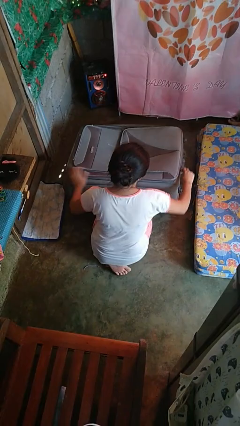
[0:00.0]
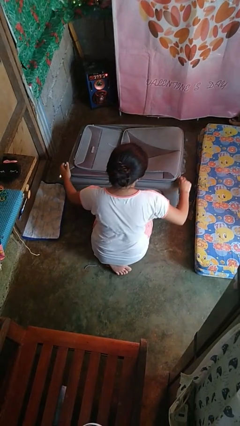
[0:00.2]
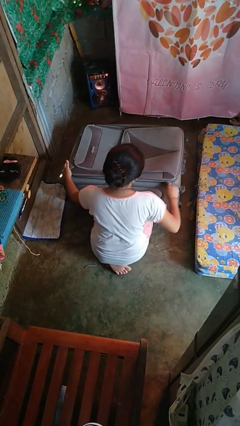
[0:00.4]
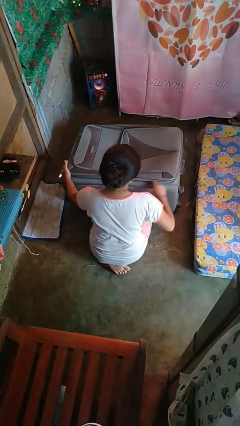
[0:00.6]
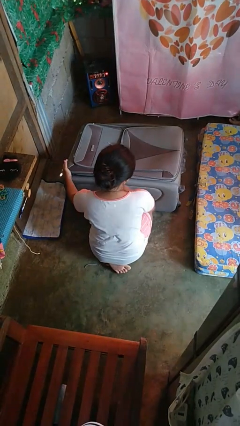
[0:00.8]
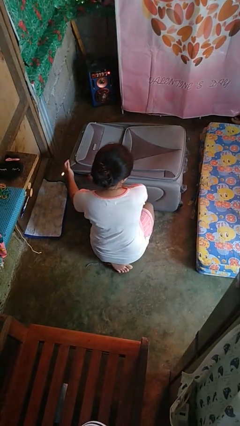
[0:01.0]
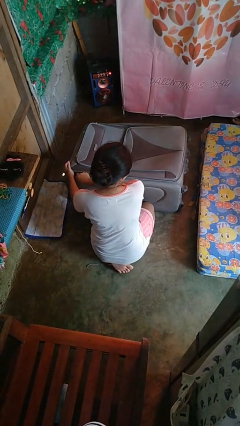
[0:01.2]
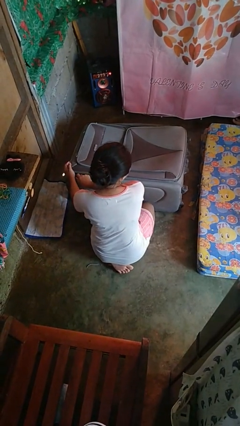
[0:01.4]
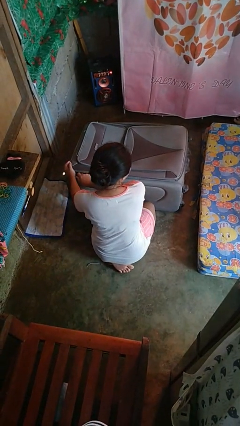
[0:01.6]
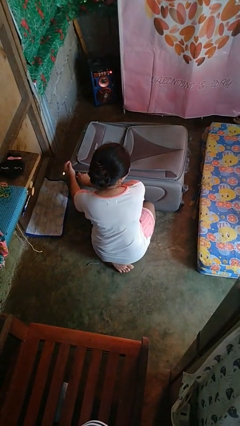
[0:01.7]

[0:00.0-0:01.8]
person closes suitcase

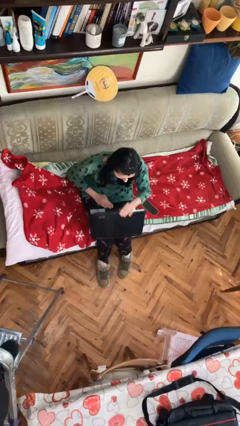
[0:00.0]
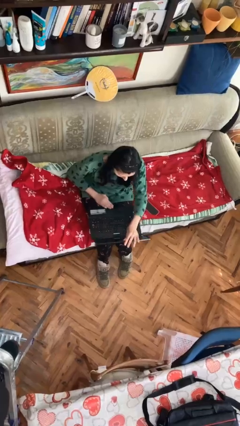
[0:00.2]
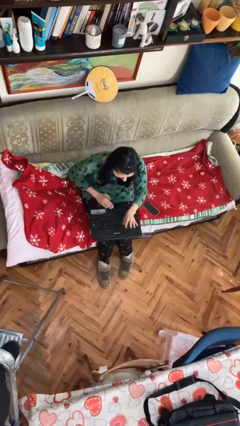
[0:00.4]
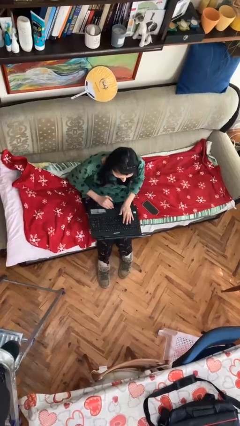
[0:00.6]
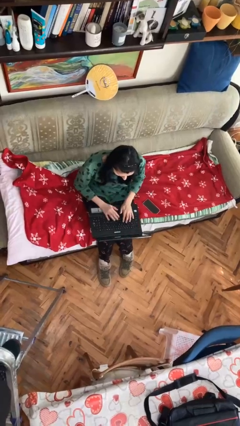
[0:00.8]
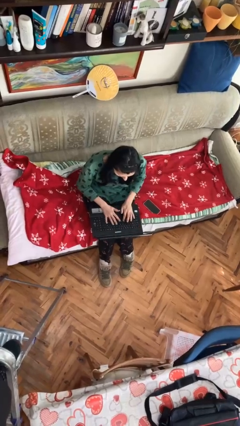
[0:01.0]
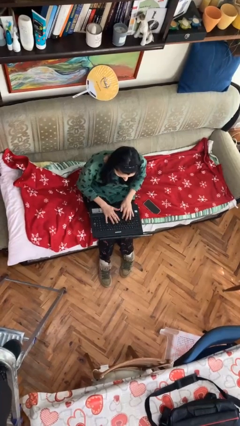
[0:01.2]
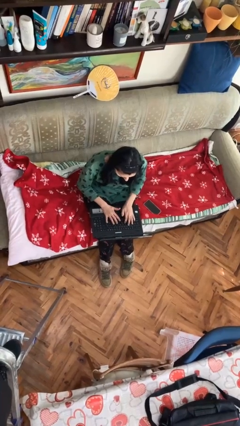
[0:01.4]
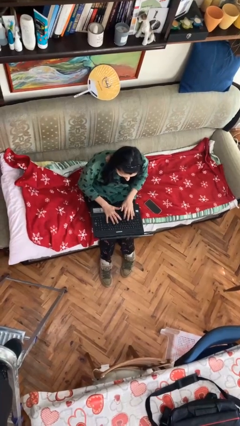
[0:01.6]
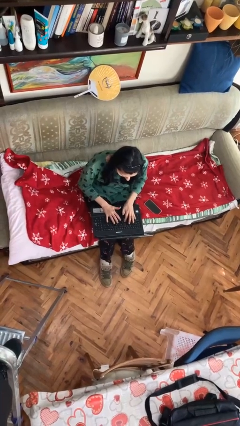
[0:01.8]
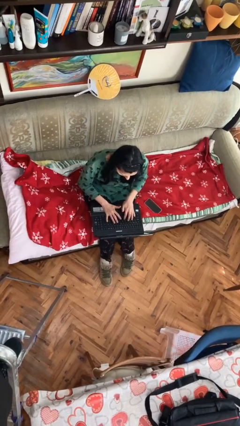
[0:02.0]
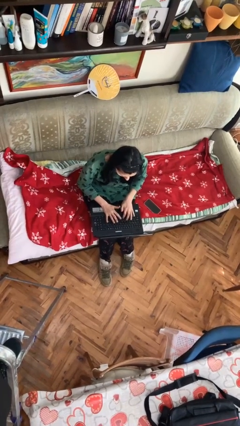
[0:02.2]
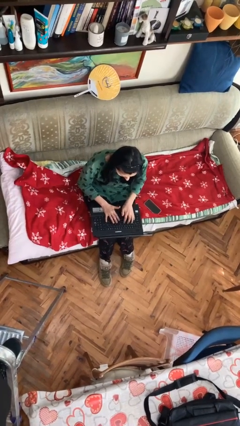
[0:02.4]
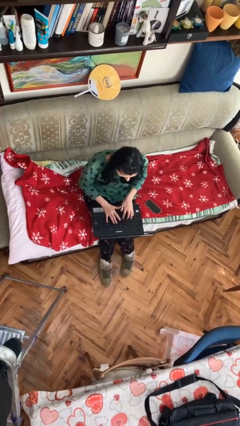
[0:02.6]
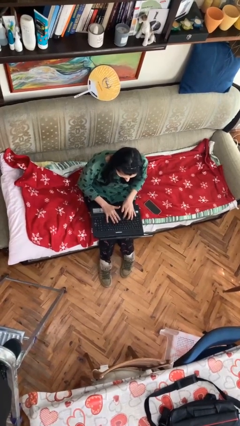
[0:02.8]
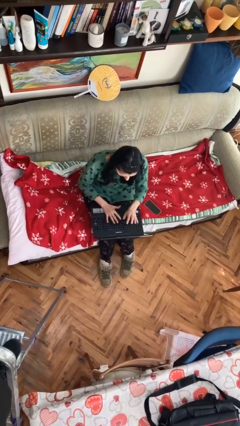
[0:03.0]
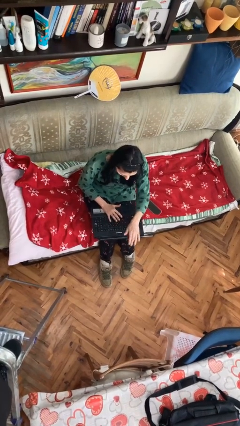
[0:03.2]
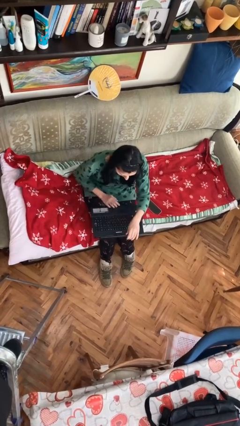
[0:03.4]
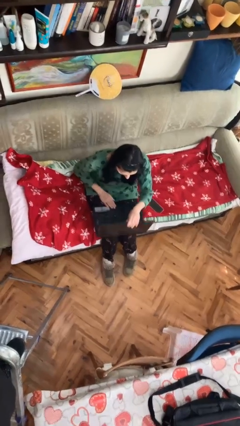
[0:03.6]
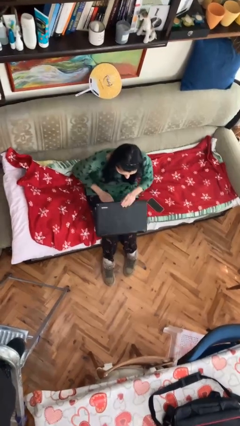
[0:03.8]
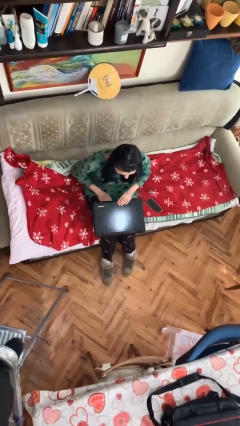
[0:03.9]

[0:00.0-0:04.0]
person interacts with laptop

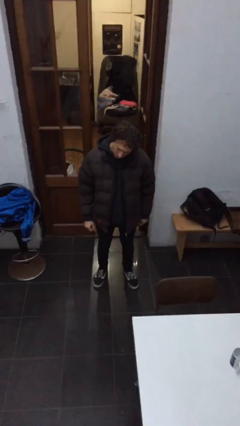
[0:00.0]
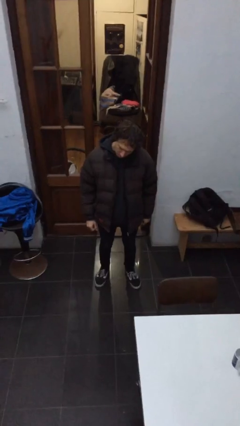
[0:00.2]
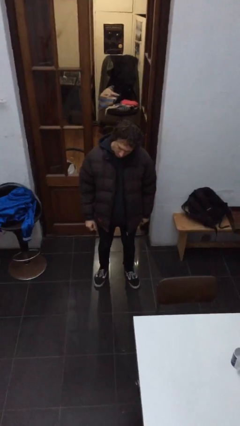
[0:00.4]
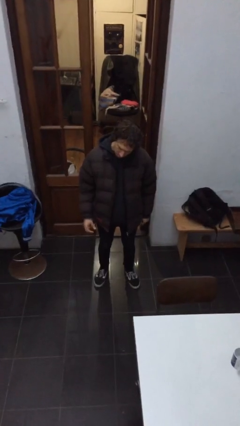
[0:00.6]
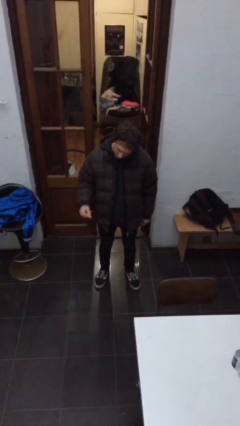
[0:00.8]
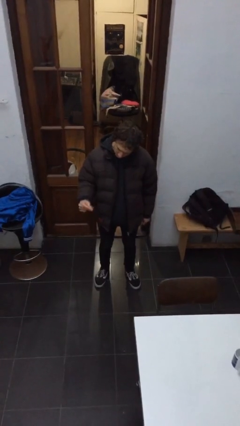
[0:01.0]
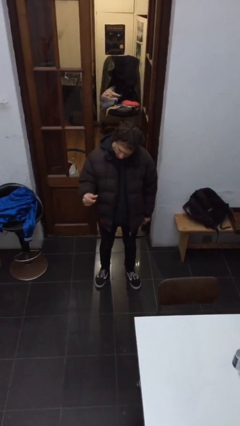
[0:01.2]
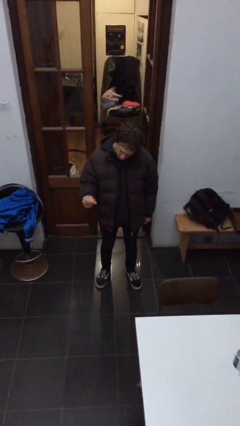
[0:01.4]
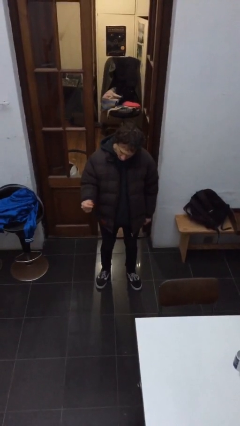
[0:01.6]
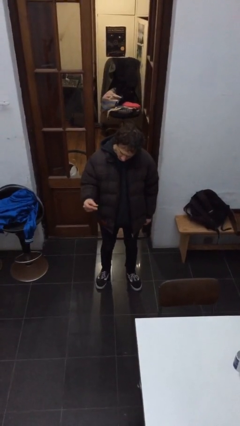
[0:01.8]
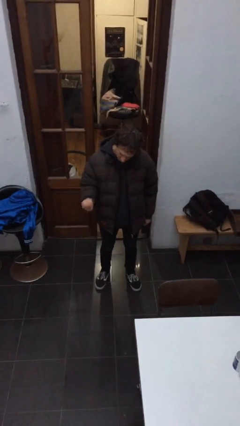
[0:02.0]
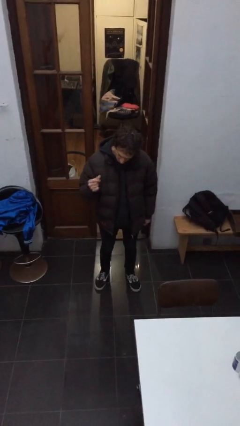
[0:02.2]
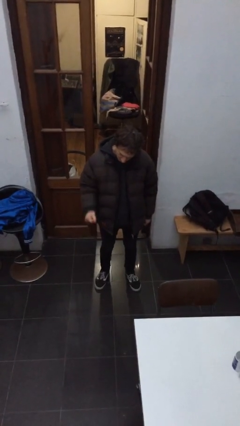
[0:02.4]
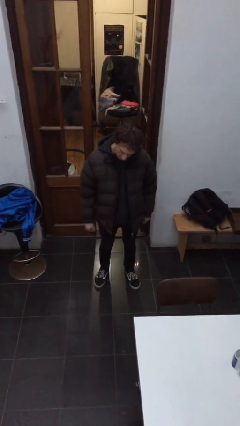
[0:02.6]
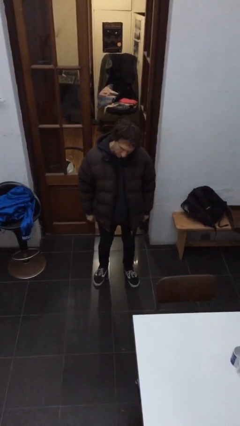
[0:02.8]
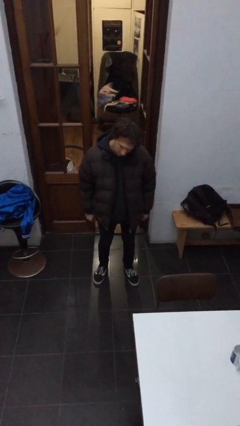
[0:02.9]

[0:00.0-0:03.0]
person snaps fingers

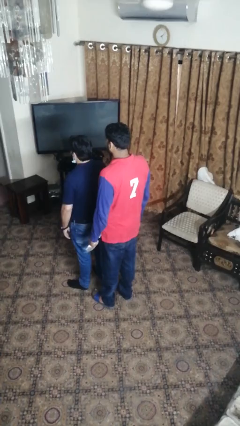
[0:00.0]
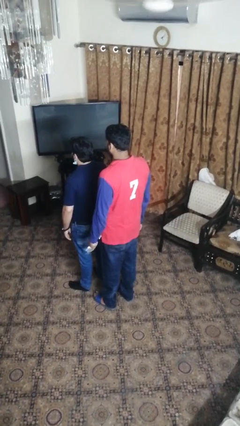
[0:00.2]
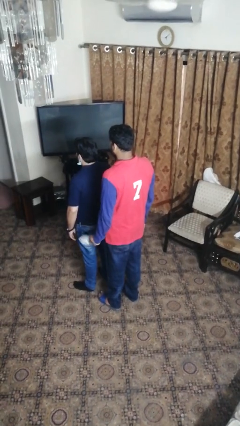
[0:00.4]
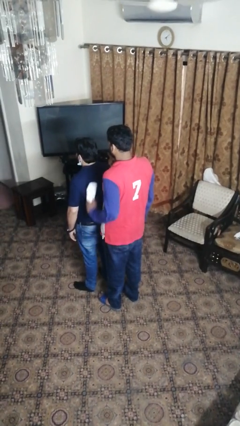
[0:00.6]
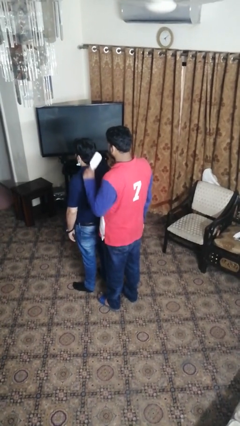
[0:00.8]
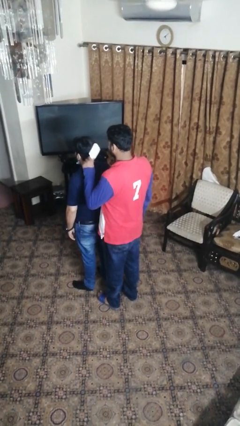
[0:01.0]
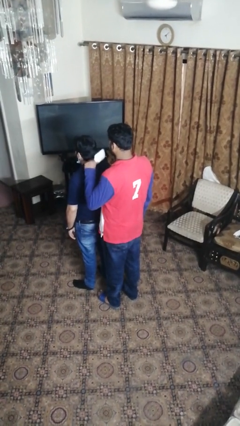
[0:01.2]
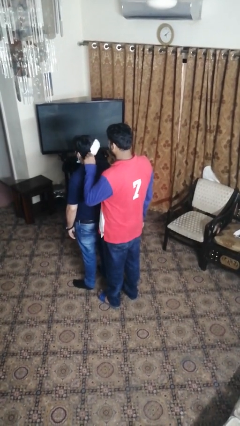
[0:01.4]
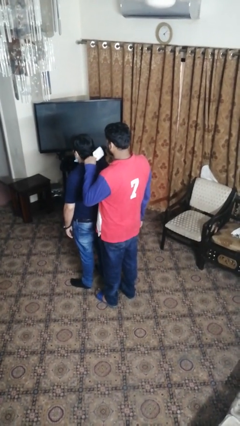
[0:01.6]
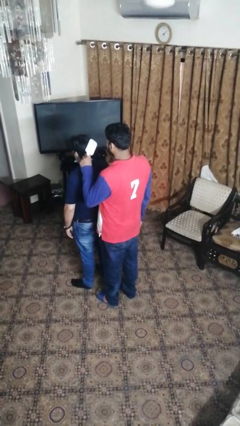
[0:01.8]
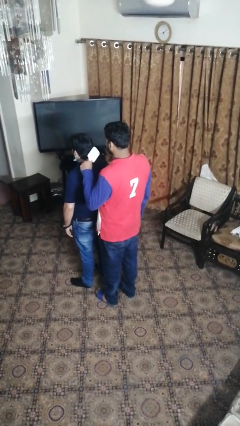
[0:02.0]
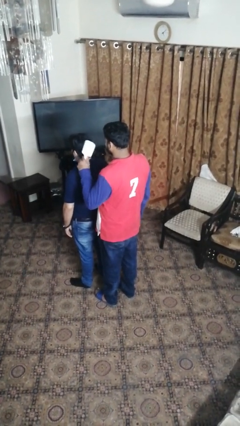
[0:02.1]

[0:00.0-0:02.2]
person brushes hair of person

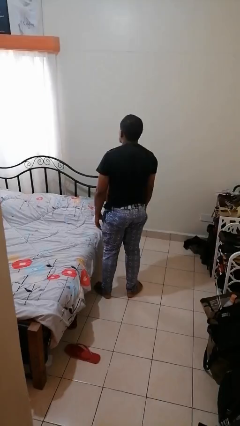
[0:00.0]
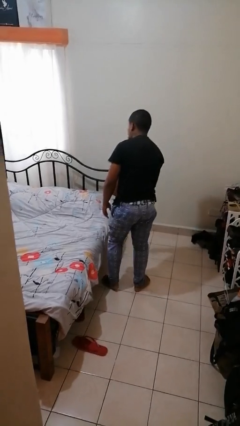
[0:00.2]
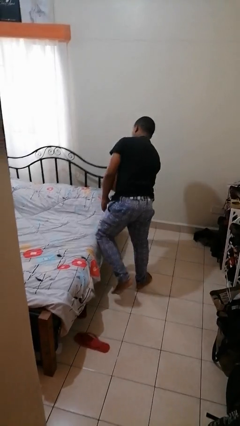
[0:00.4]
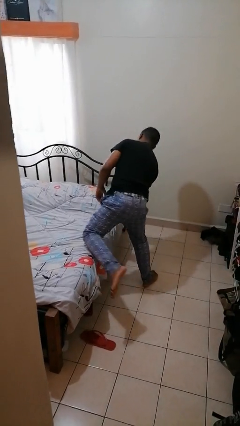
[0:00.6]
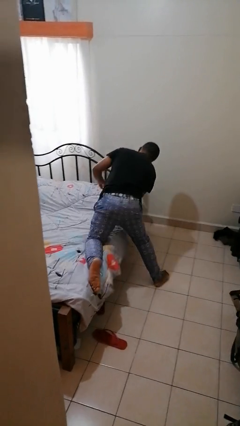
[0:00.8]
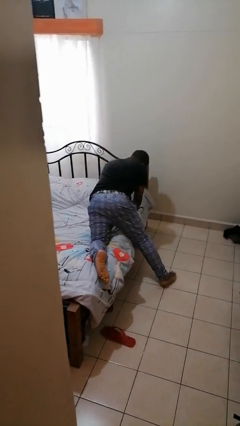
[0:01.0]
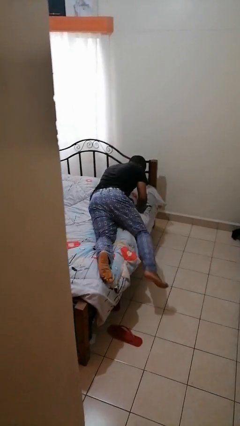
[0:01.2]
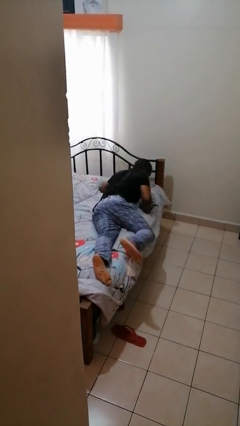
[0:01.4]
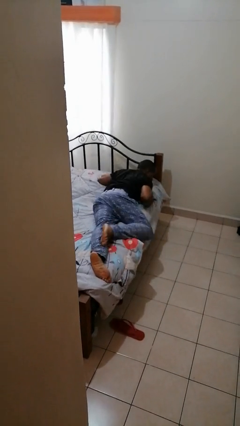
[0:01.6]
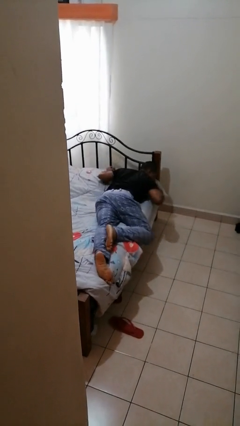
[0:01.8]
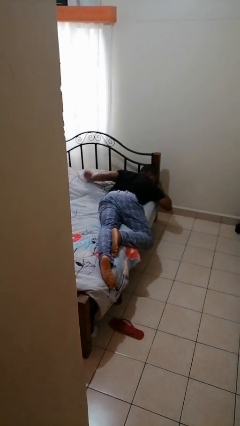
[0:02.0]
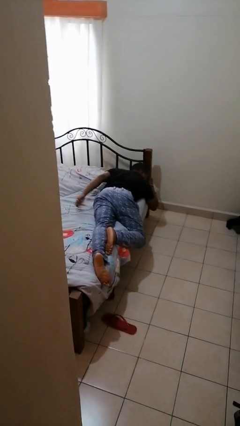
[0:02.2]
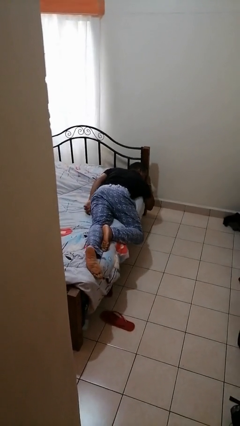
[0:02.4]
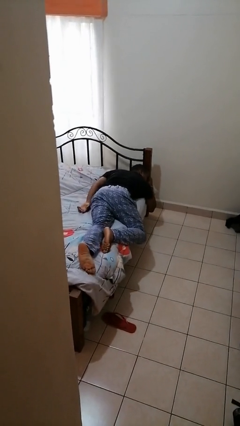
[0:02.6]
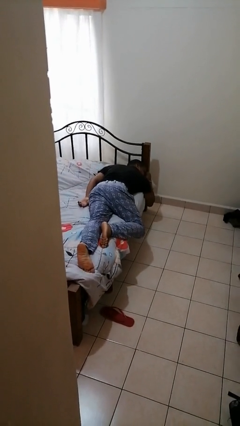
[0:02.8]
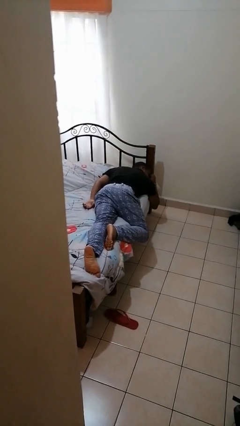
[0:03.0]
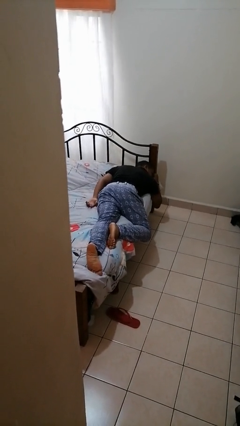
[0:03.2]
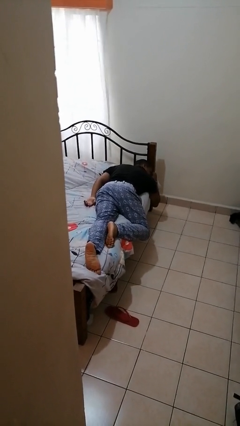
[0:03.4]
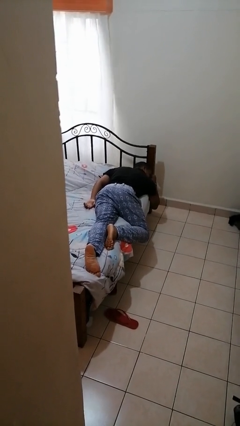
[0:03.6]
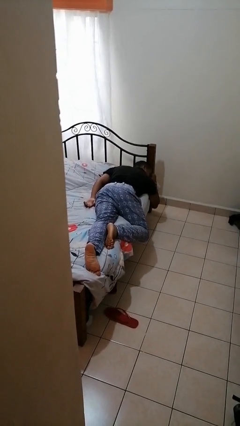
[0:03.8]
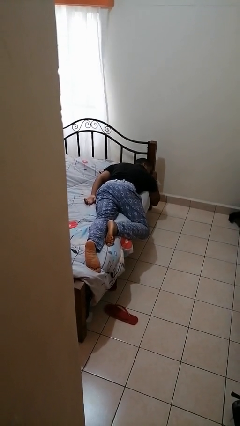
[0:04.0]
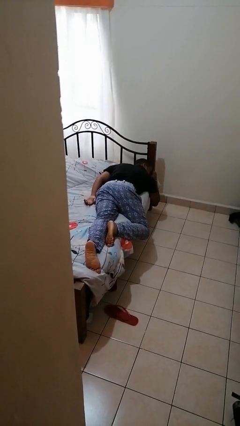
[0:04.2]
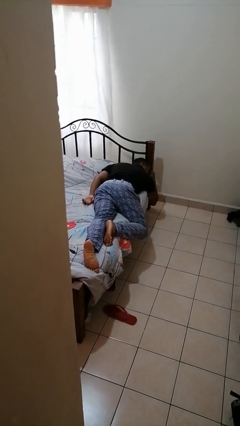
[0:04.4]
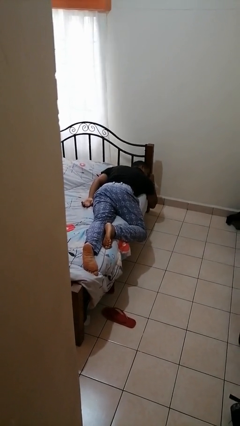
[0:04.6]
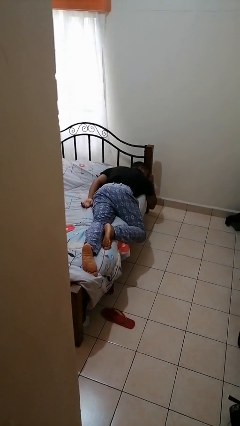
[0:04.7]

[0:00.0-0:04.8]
person lies down on bed

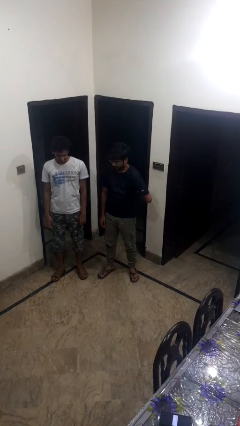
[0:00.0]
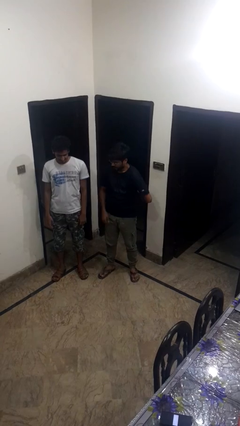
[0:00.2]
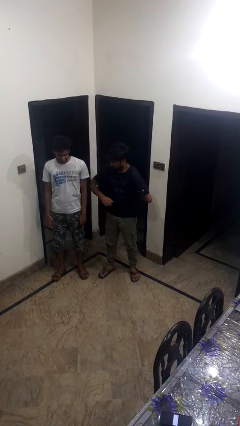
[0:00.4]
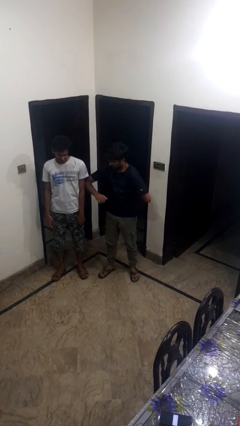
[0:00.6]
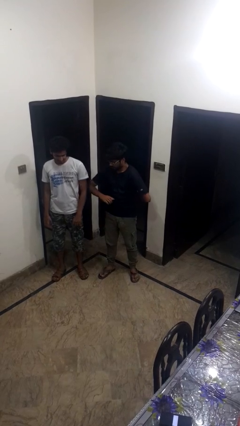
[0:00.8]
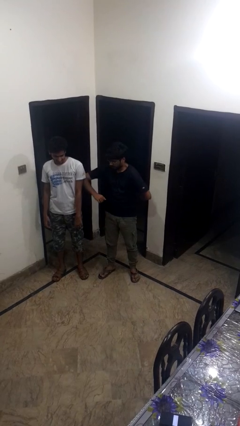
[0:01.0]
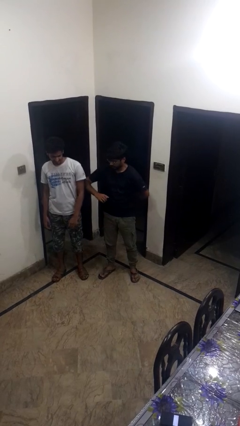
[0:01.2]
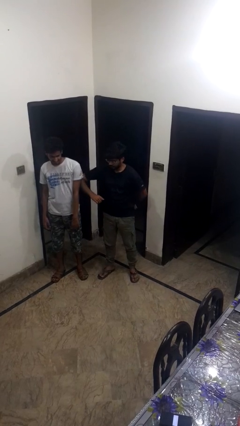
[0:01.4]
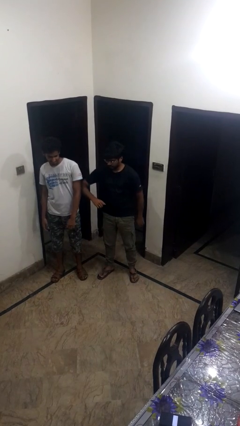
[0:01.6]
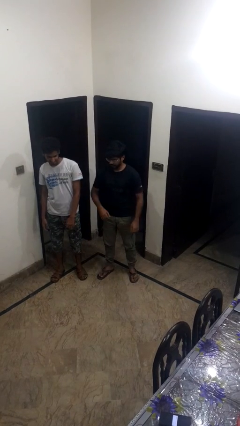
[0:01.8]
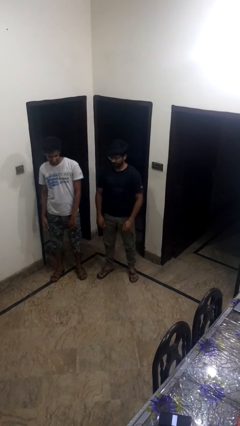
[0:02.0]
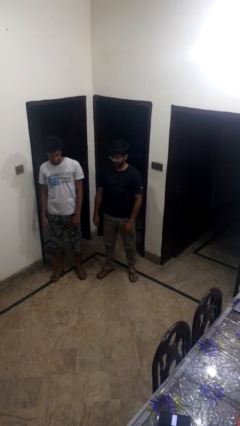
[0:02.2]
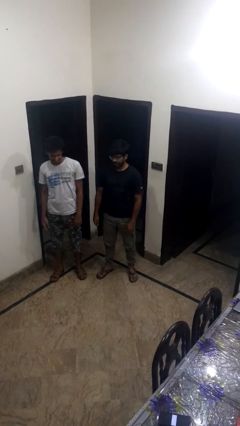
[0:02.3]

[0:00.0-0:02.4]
person nudges person with elbow
